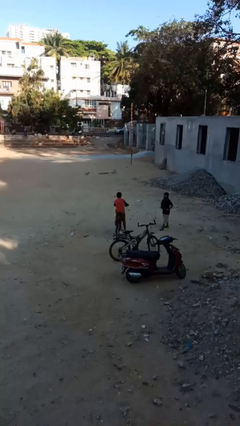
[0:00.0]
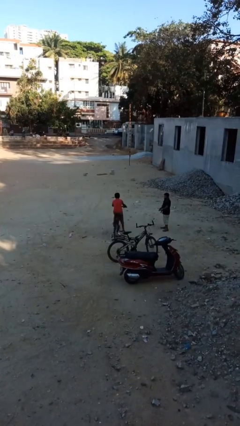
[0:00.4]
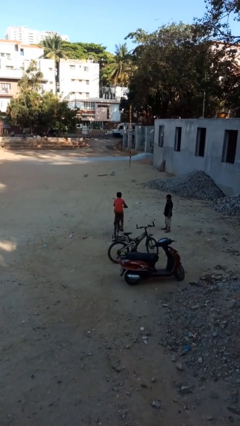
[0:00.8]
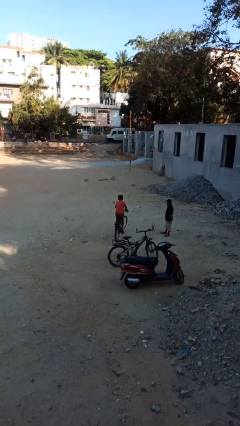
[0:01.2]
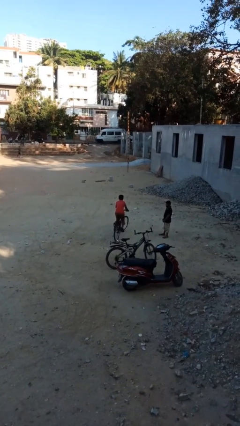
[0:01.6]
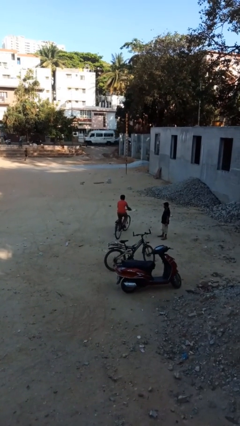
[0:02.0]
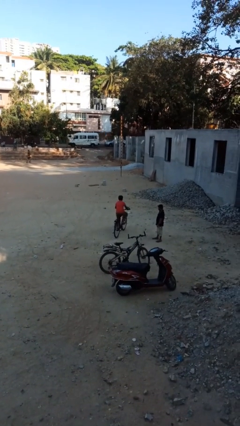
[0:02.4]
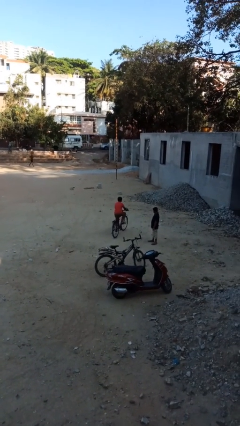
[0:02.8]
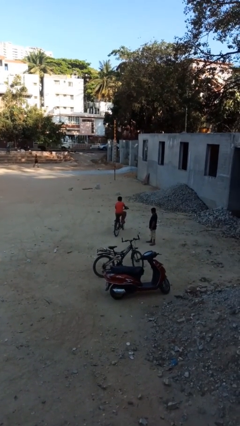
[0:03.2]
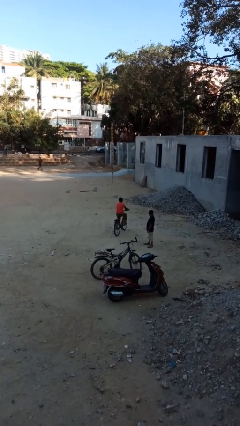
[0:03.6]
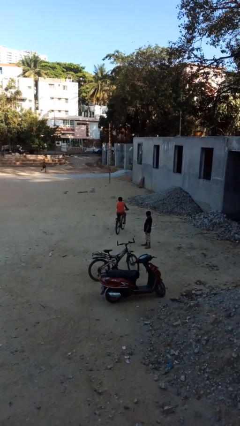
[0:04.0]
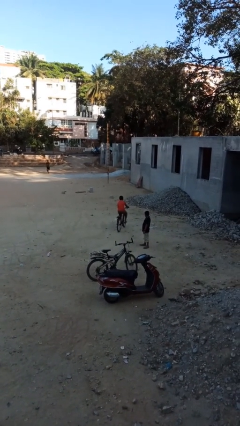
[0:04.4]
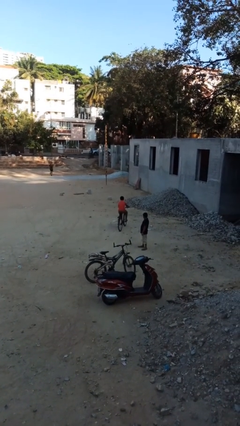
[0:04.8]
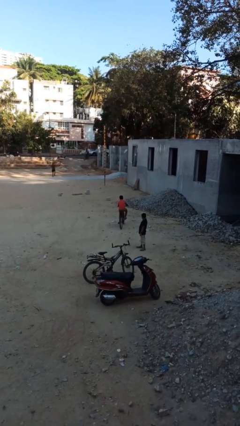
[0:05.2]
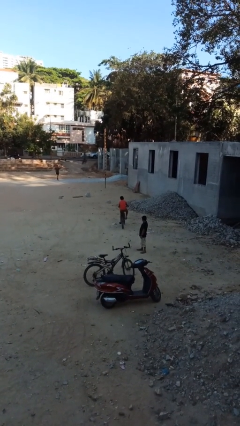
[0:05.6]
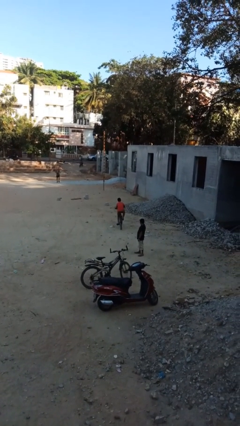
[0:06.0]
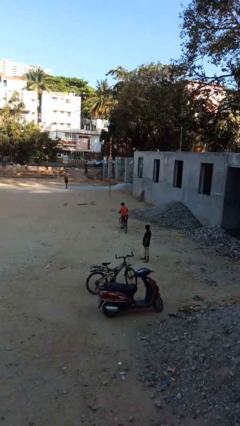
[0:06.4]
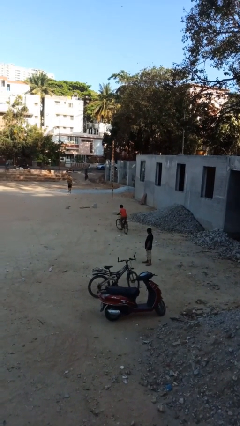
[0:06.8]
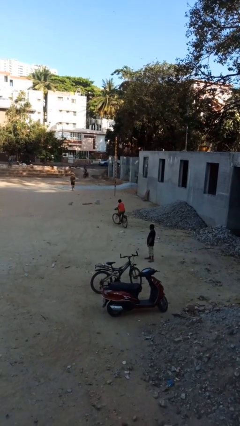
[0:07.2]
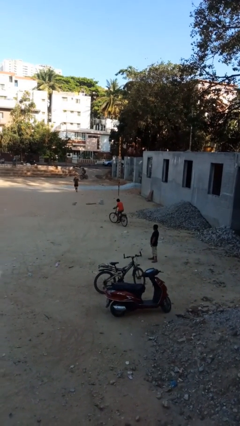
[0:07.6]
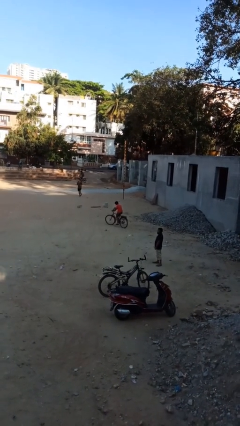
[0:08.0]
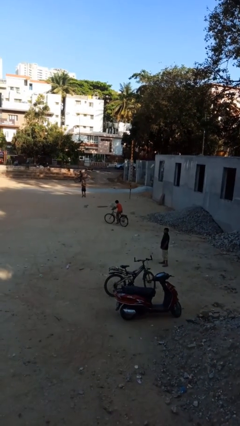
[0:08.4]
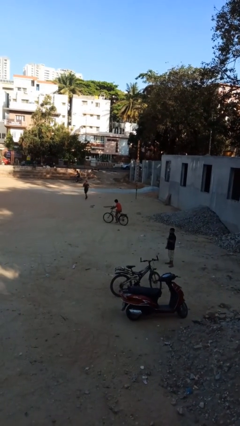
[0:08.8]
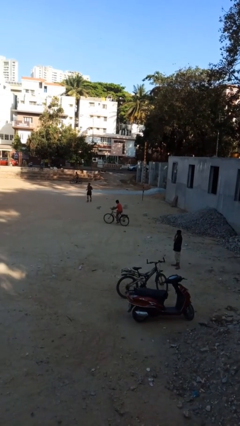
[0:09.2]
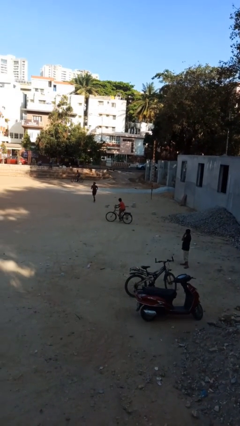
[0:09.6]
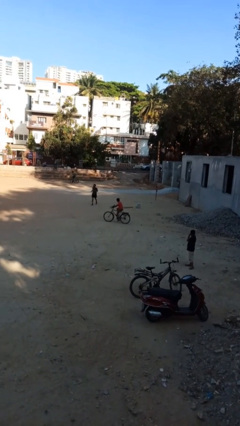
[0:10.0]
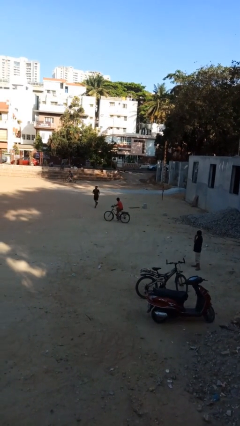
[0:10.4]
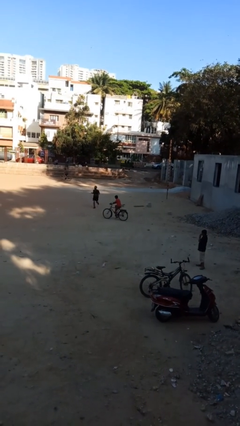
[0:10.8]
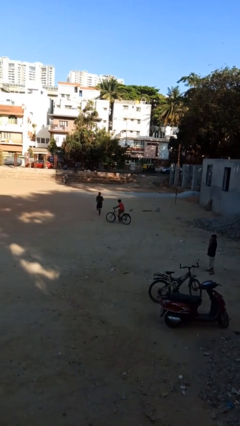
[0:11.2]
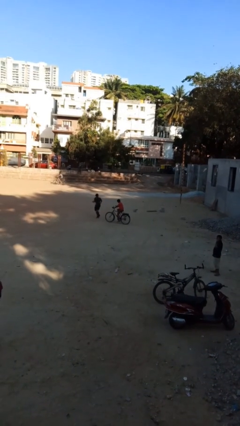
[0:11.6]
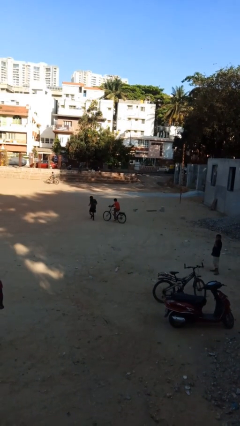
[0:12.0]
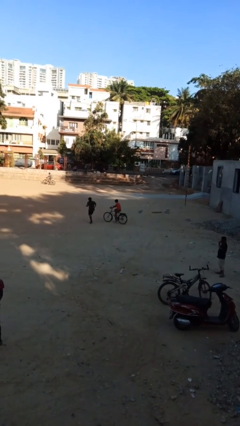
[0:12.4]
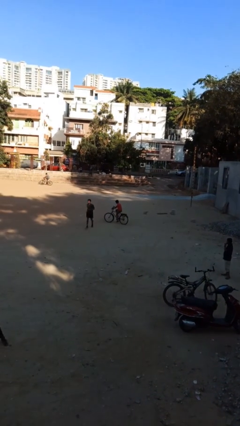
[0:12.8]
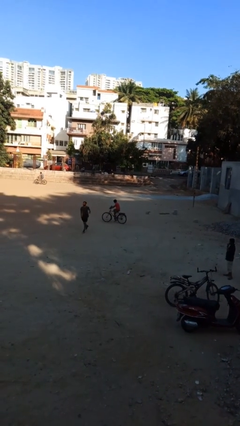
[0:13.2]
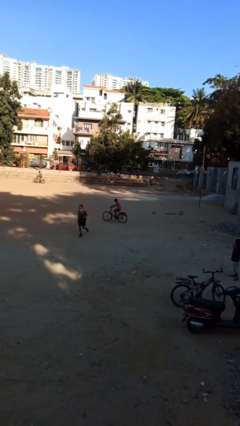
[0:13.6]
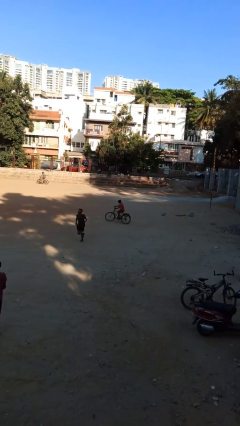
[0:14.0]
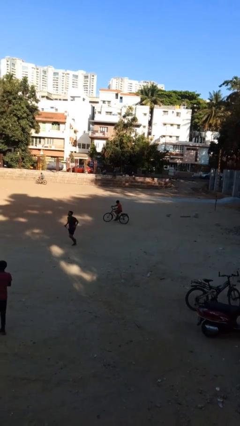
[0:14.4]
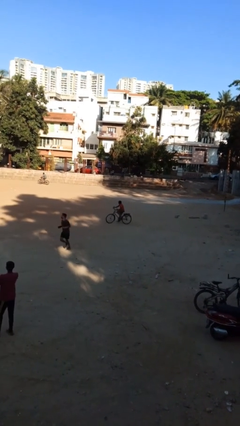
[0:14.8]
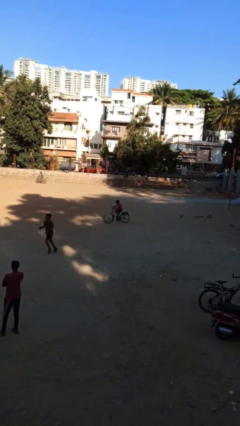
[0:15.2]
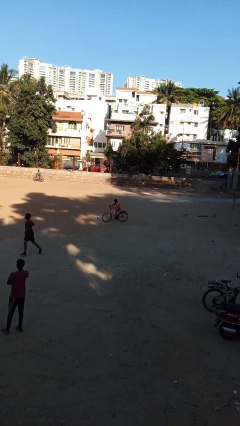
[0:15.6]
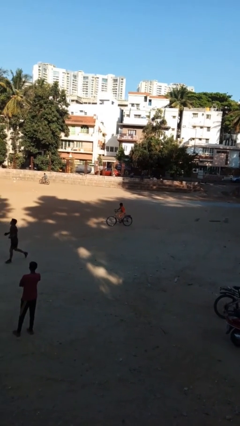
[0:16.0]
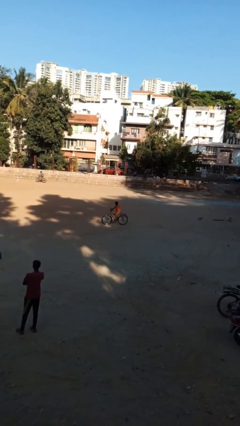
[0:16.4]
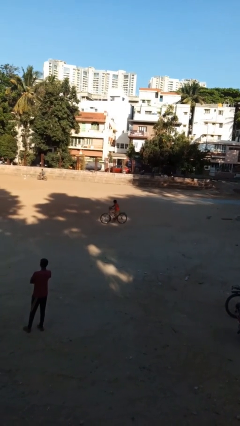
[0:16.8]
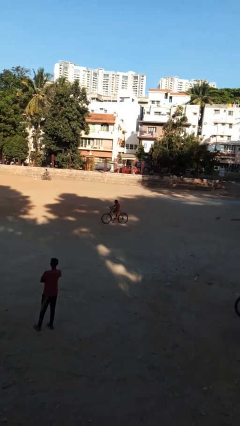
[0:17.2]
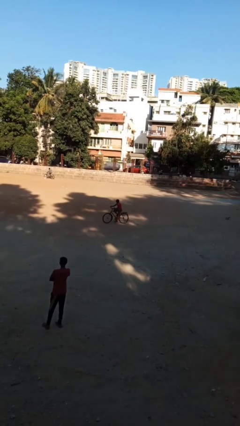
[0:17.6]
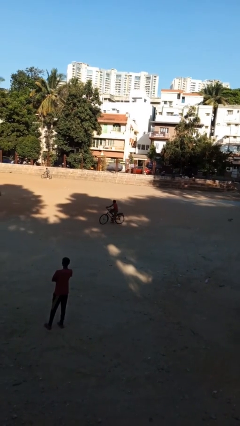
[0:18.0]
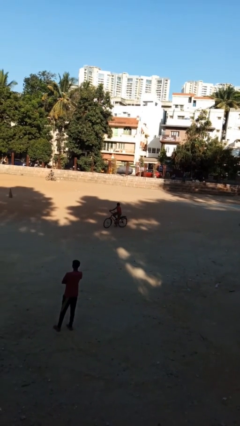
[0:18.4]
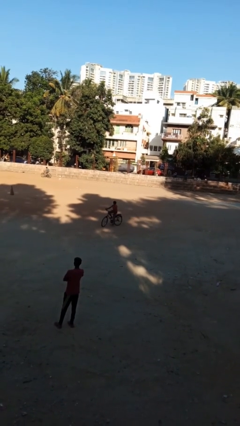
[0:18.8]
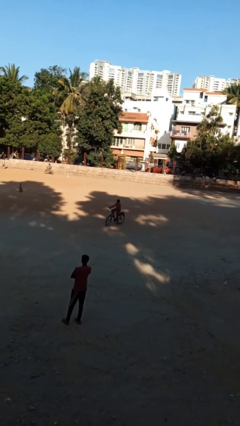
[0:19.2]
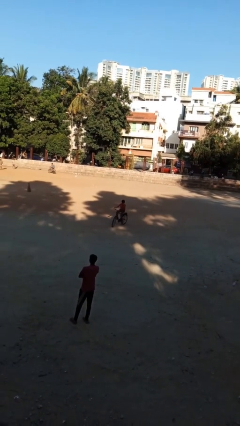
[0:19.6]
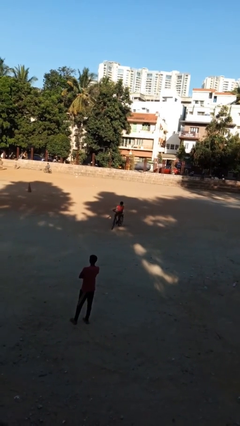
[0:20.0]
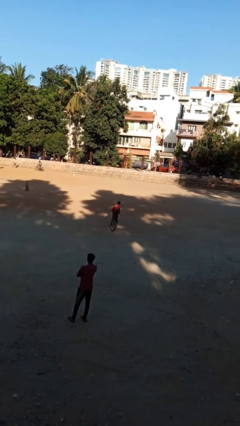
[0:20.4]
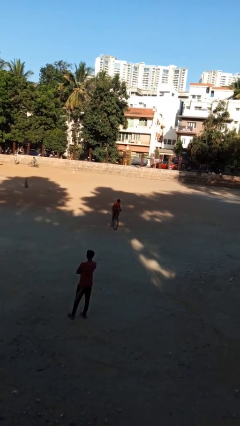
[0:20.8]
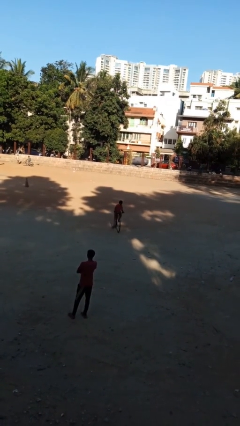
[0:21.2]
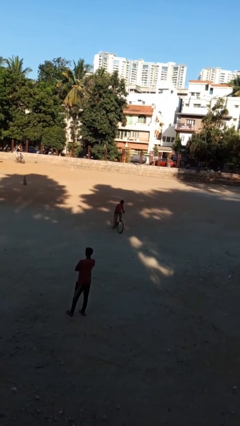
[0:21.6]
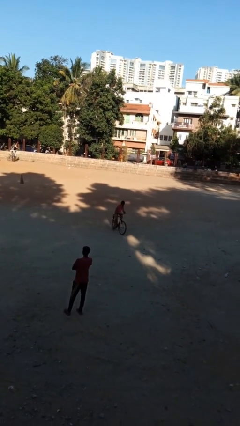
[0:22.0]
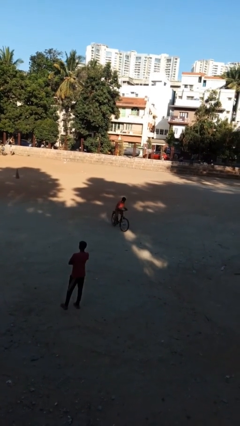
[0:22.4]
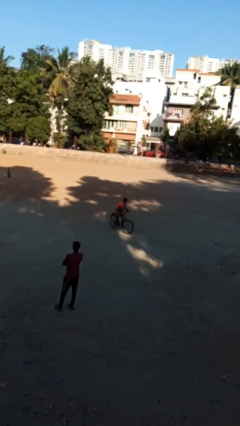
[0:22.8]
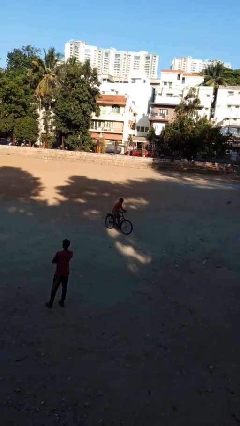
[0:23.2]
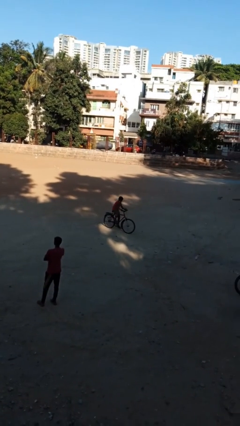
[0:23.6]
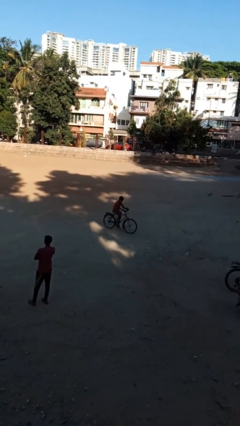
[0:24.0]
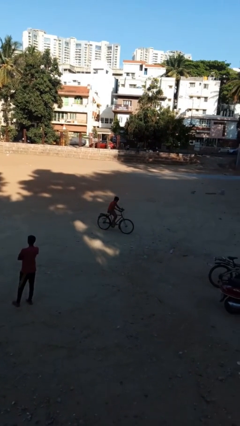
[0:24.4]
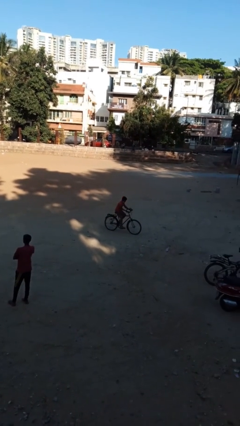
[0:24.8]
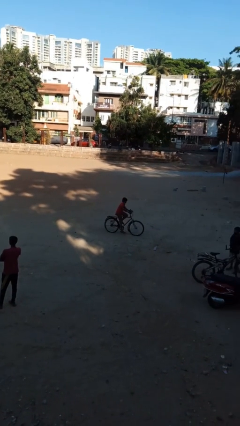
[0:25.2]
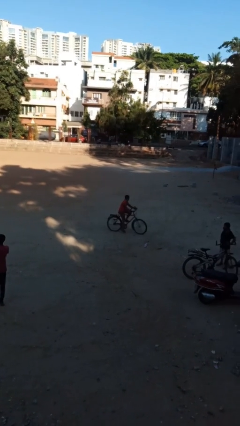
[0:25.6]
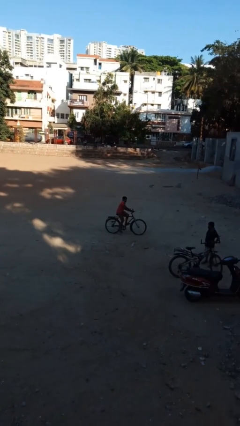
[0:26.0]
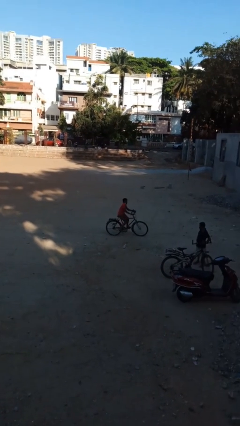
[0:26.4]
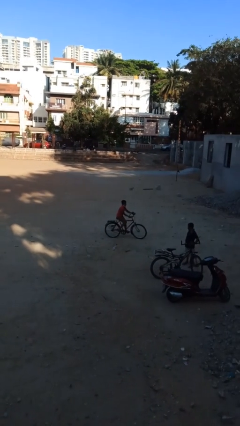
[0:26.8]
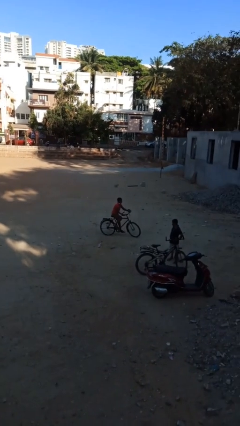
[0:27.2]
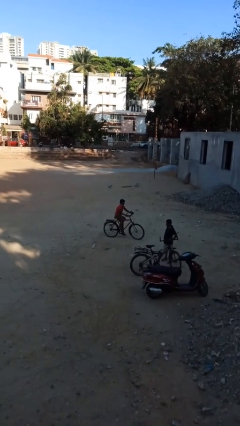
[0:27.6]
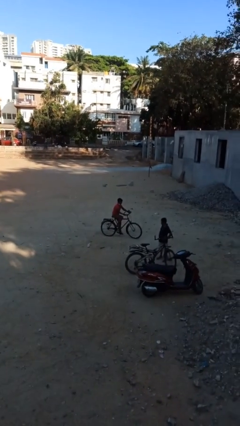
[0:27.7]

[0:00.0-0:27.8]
person rides bicycle

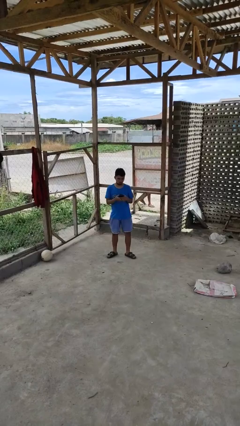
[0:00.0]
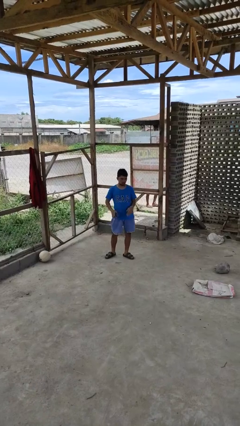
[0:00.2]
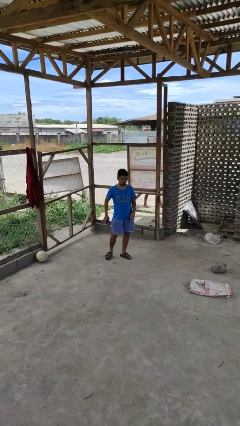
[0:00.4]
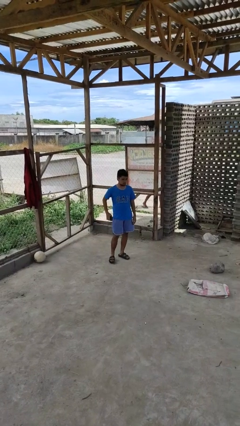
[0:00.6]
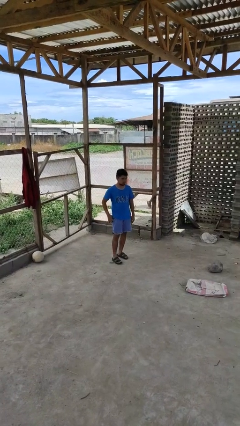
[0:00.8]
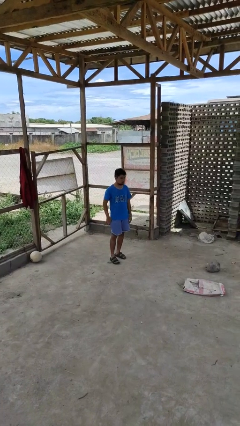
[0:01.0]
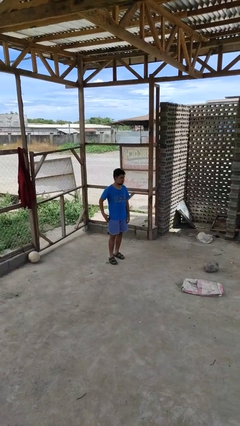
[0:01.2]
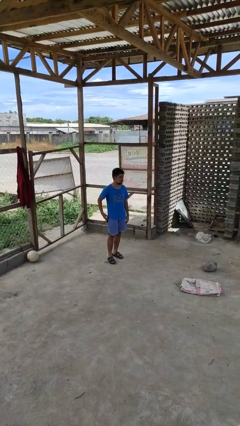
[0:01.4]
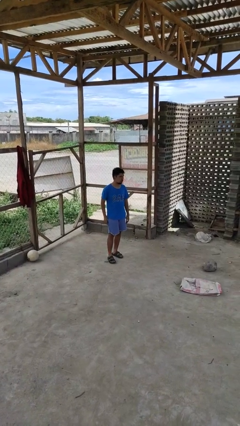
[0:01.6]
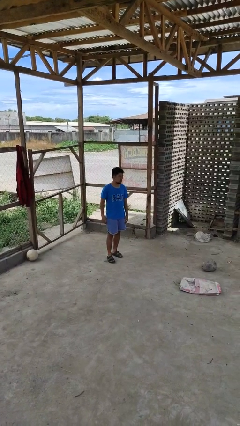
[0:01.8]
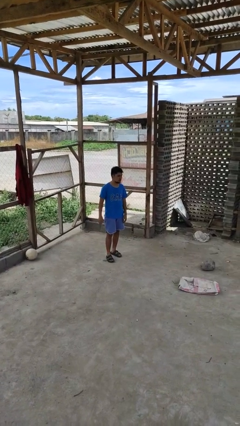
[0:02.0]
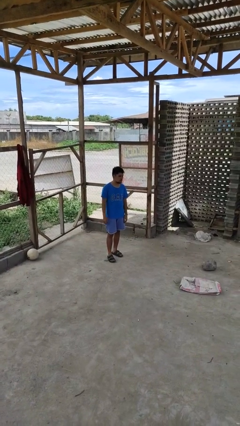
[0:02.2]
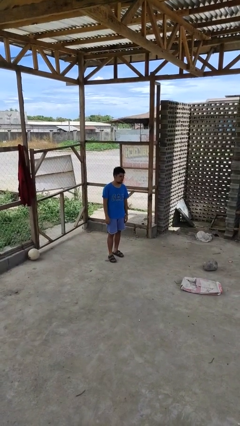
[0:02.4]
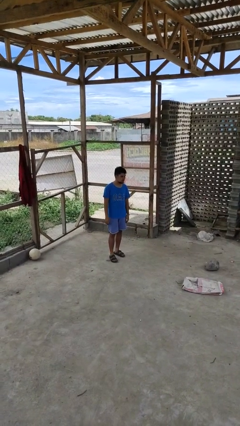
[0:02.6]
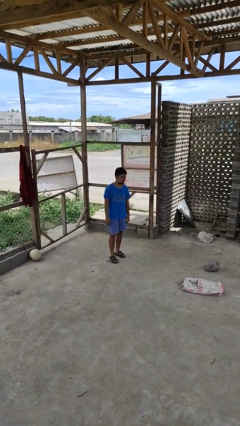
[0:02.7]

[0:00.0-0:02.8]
person puts phone into pocket

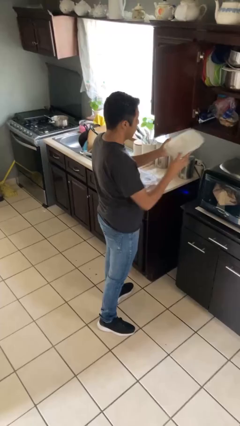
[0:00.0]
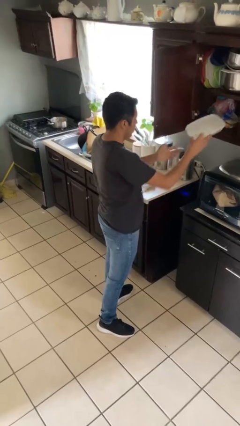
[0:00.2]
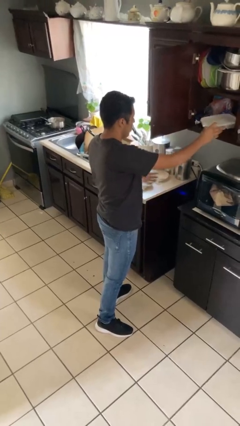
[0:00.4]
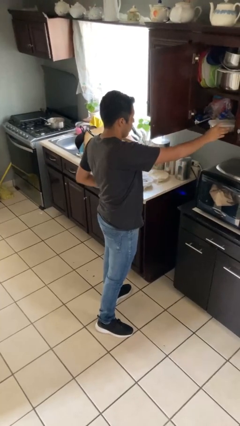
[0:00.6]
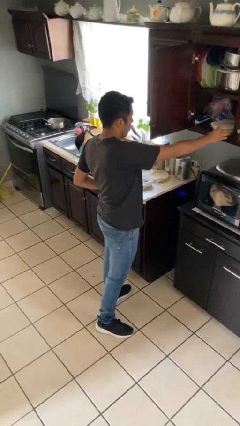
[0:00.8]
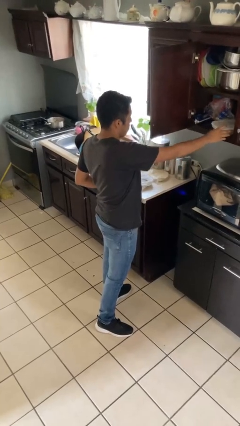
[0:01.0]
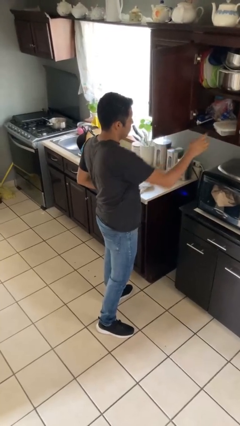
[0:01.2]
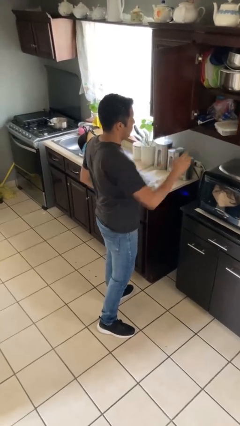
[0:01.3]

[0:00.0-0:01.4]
person puts down object into cabinet
